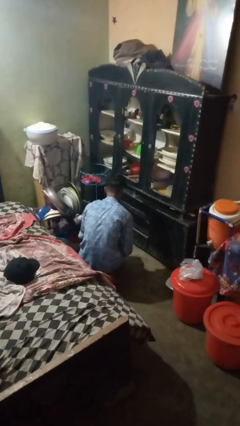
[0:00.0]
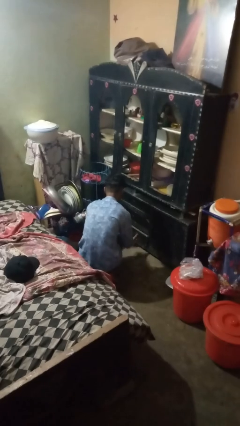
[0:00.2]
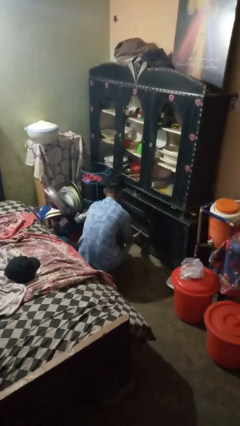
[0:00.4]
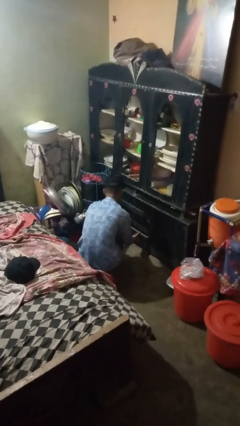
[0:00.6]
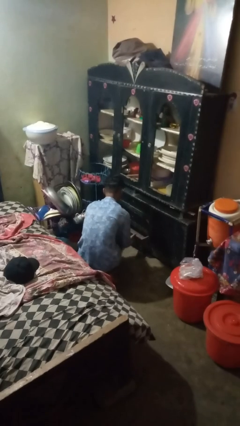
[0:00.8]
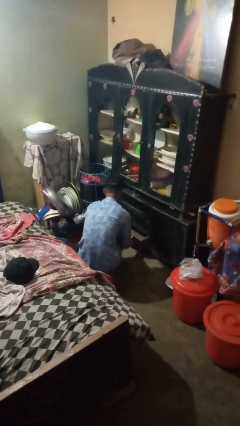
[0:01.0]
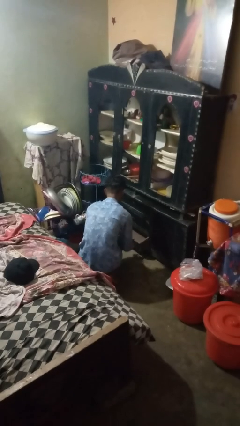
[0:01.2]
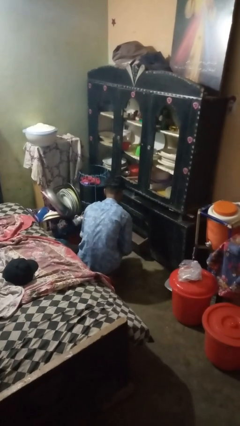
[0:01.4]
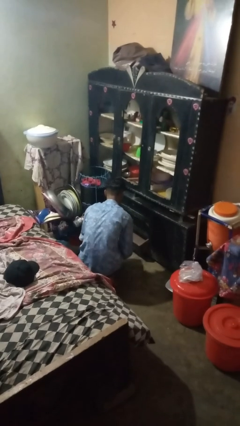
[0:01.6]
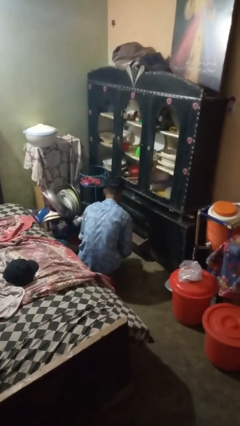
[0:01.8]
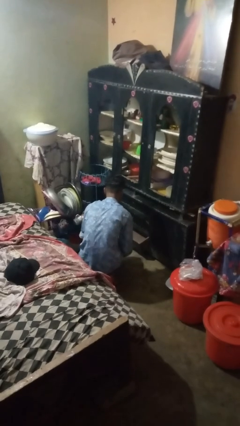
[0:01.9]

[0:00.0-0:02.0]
person opens kitchen drawer

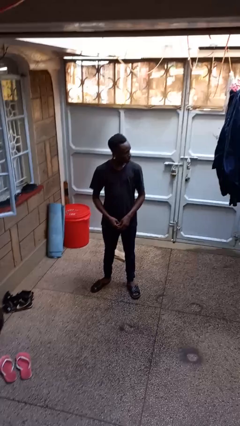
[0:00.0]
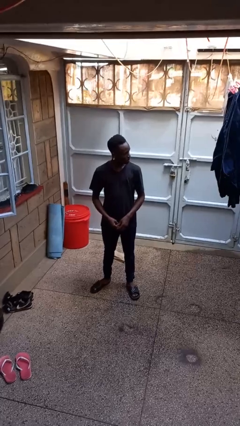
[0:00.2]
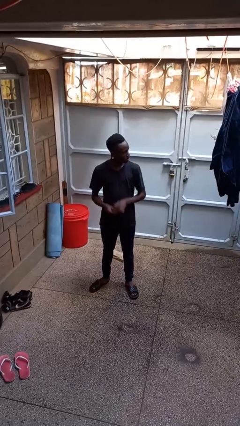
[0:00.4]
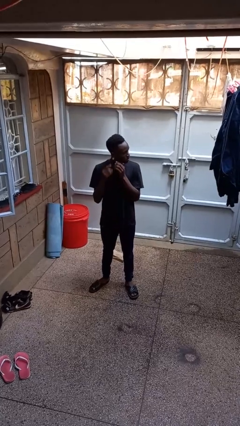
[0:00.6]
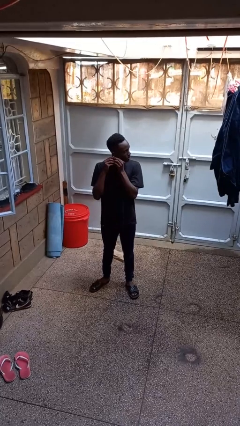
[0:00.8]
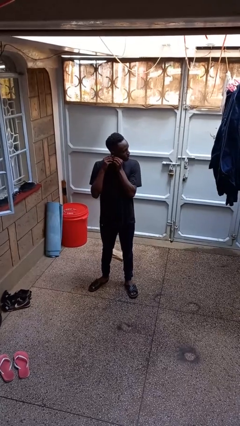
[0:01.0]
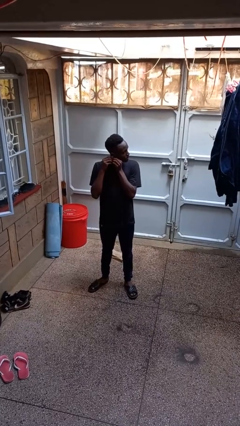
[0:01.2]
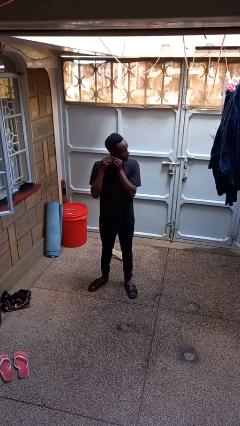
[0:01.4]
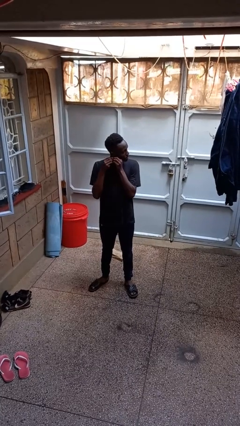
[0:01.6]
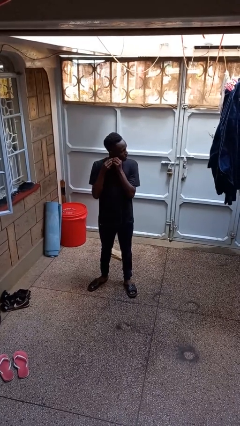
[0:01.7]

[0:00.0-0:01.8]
person takes off earrings

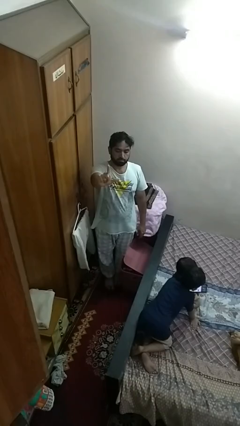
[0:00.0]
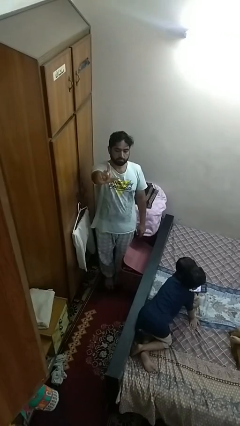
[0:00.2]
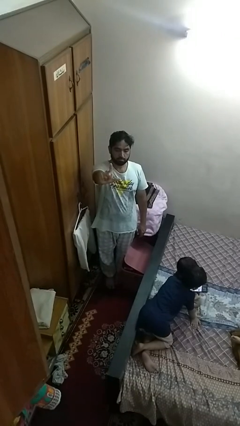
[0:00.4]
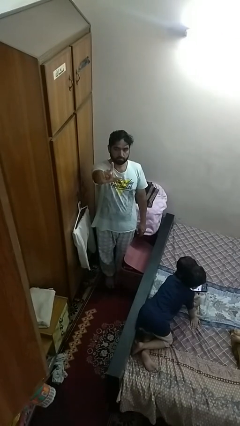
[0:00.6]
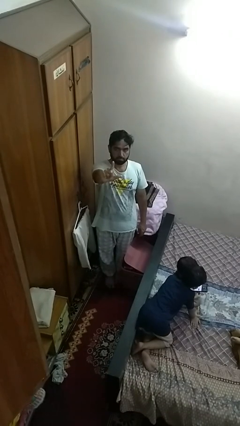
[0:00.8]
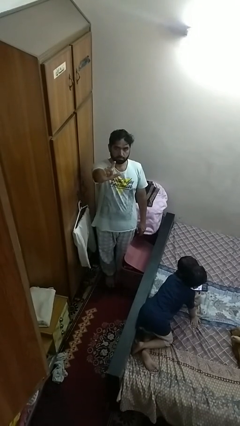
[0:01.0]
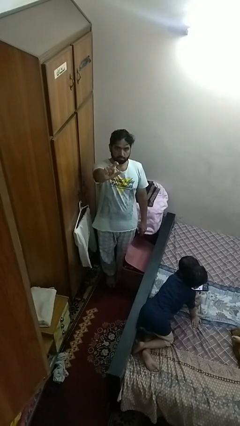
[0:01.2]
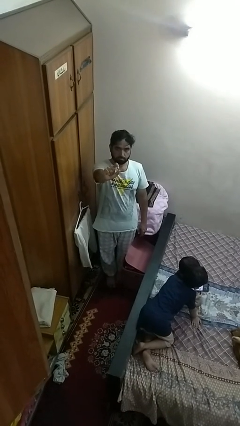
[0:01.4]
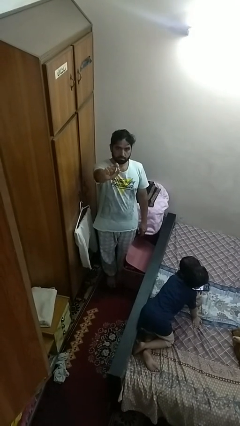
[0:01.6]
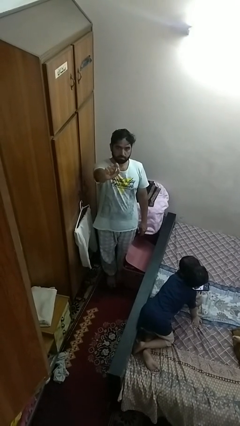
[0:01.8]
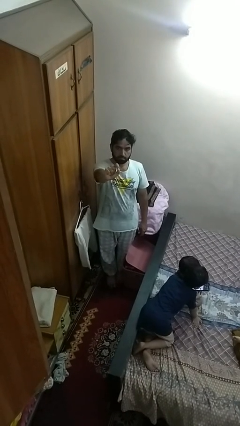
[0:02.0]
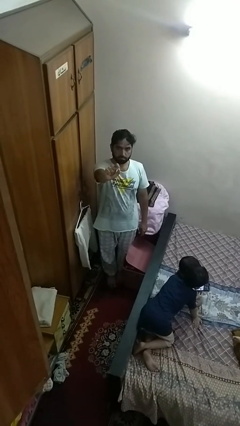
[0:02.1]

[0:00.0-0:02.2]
person gestures zoom in

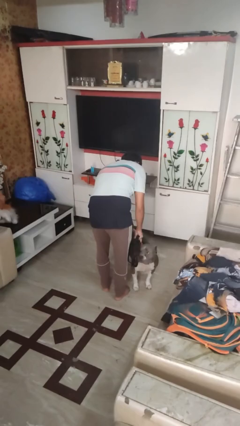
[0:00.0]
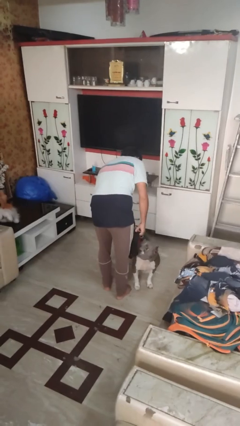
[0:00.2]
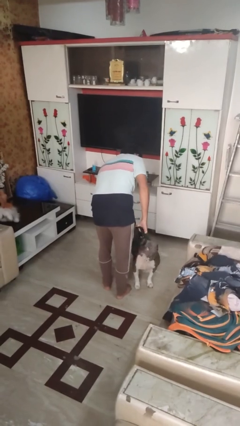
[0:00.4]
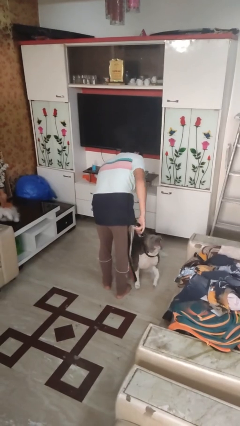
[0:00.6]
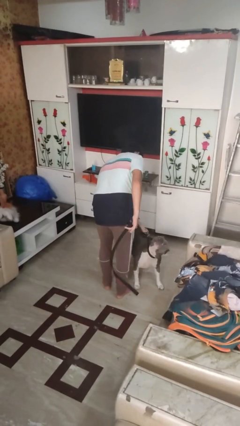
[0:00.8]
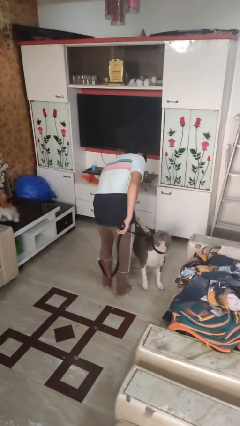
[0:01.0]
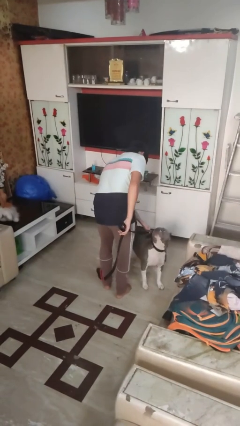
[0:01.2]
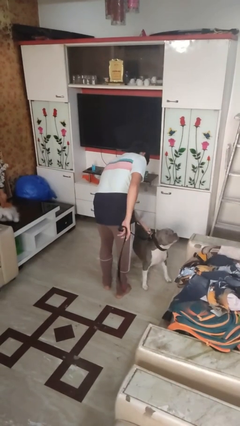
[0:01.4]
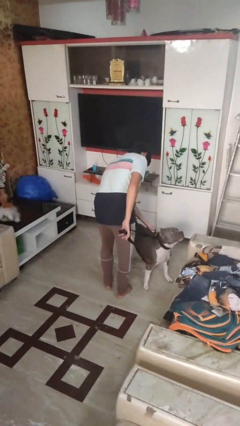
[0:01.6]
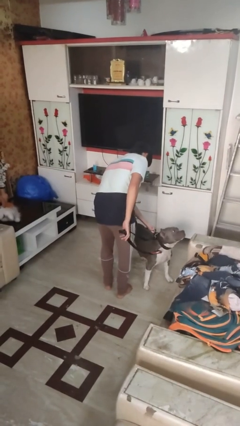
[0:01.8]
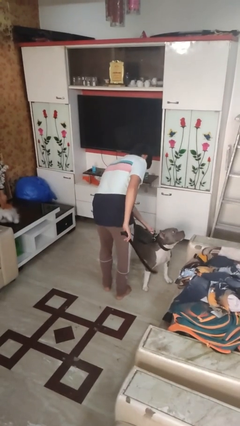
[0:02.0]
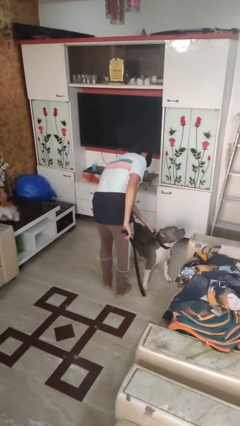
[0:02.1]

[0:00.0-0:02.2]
person attaches leash to dog

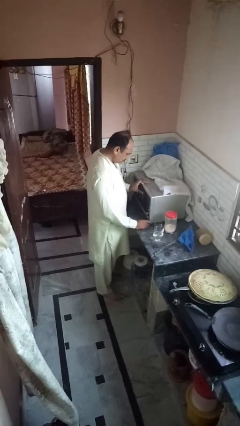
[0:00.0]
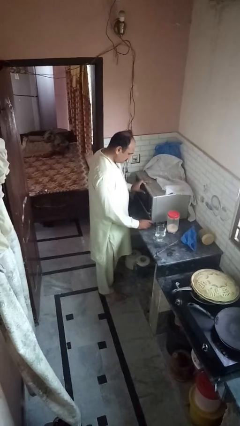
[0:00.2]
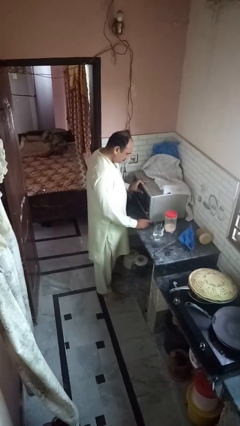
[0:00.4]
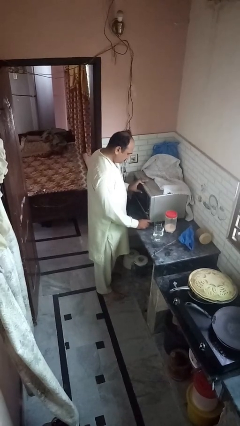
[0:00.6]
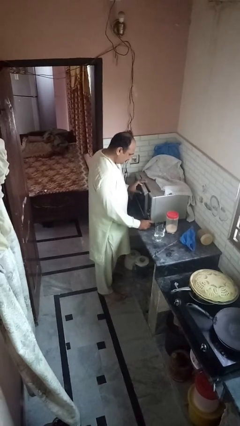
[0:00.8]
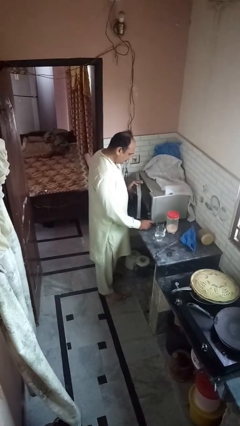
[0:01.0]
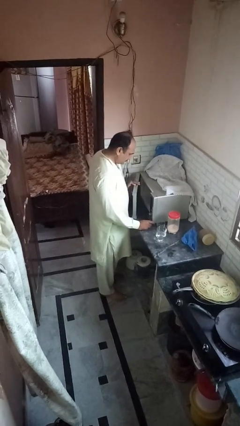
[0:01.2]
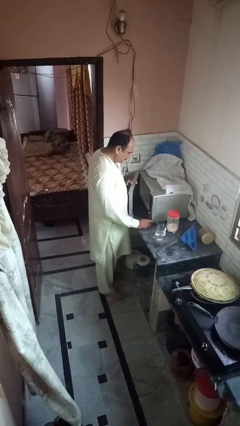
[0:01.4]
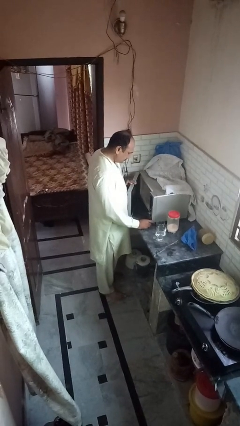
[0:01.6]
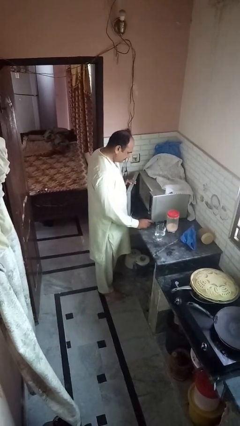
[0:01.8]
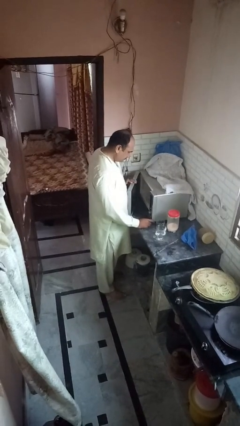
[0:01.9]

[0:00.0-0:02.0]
person opens microwave

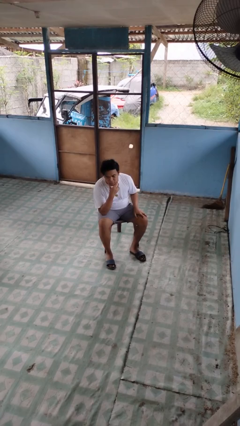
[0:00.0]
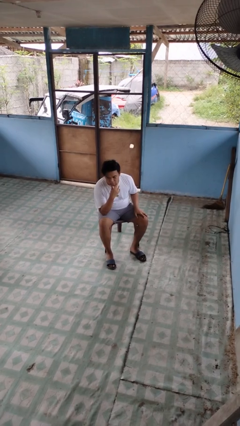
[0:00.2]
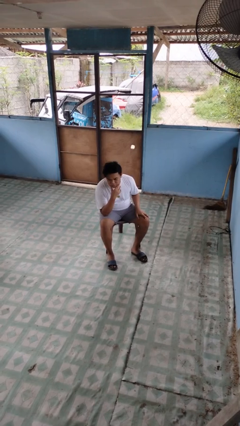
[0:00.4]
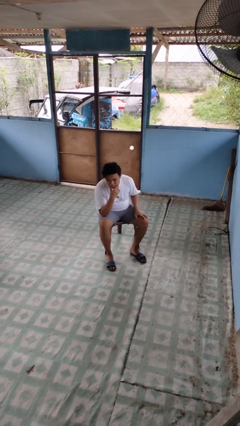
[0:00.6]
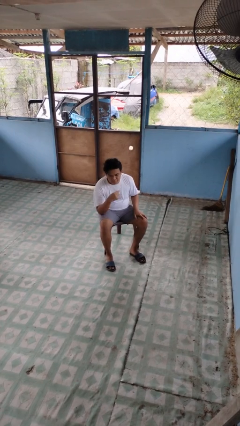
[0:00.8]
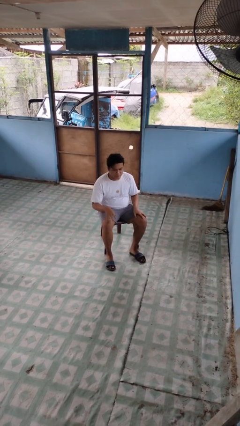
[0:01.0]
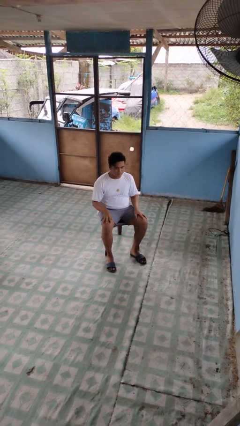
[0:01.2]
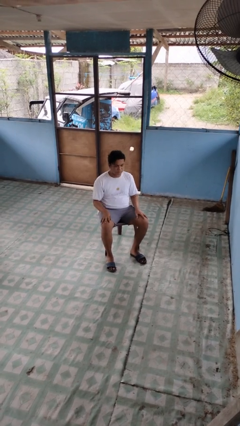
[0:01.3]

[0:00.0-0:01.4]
person strokes chin

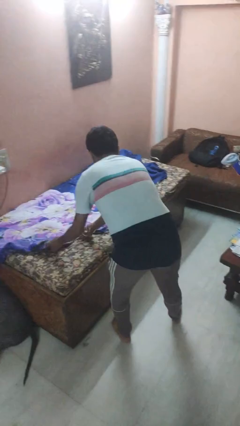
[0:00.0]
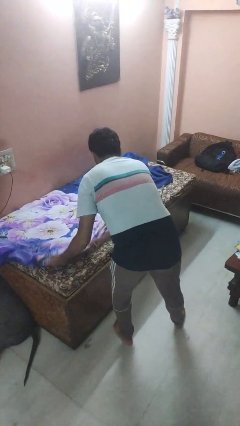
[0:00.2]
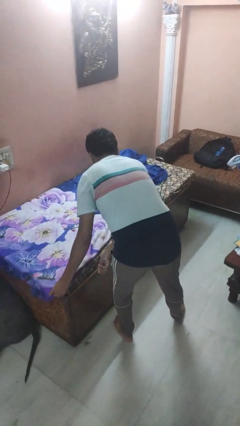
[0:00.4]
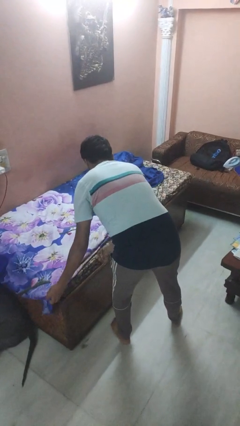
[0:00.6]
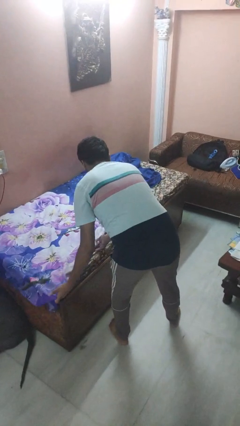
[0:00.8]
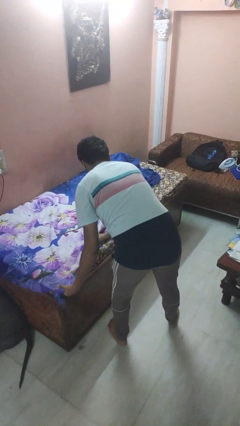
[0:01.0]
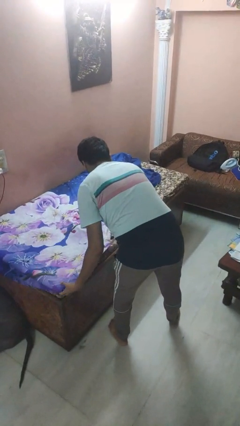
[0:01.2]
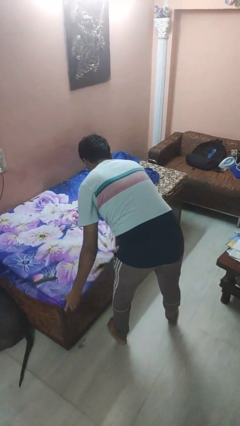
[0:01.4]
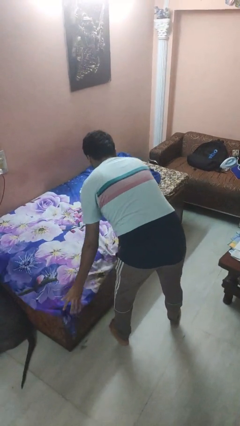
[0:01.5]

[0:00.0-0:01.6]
person makes bed

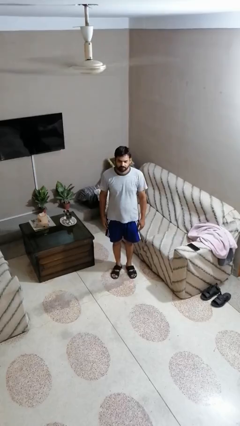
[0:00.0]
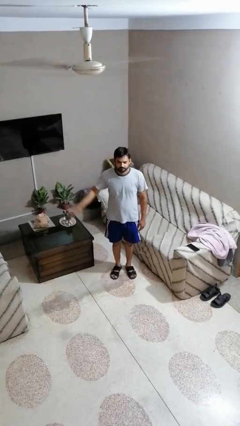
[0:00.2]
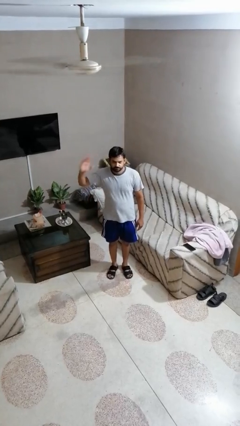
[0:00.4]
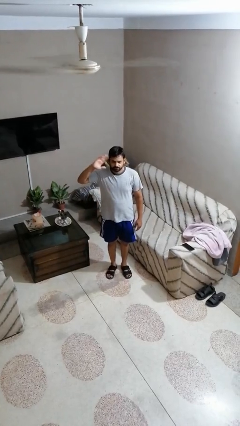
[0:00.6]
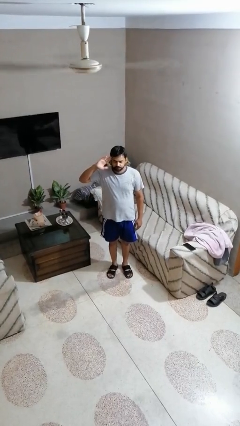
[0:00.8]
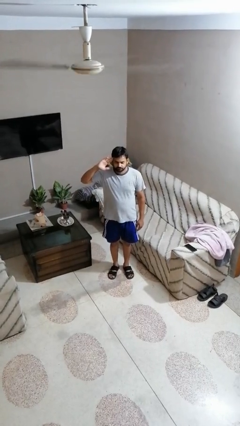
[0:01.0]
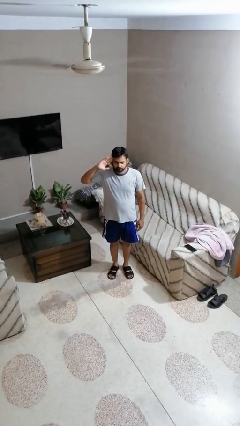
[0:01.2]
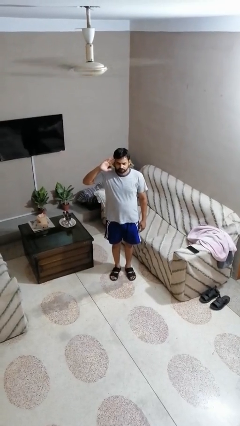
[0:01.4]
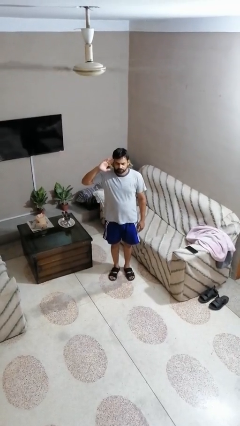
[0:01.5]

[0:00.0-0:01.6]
person salutes

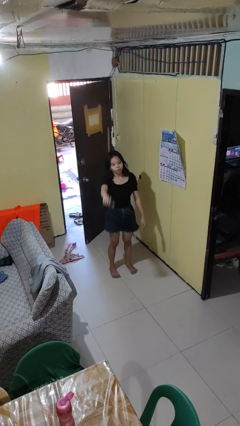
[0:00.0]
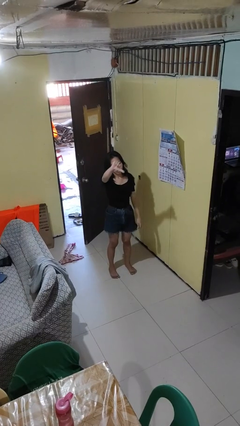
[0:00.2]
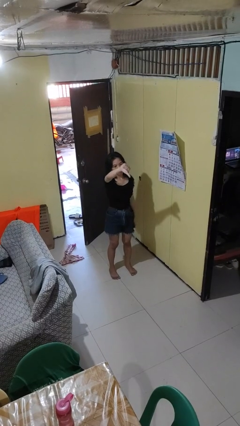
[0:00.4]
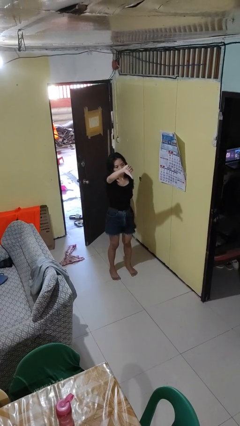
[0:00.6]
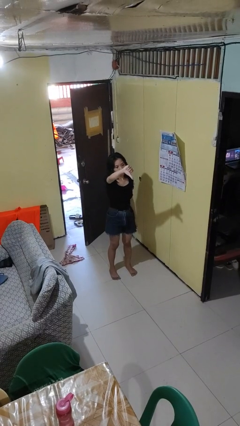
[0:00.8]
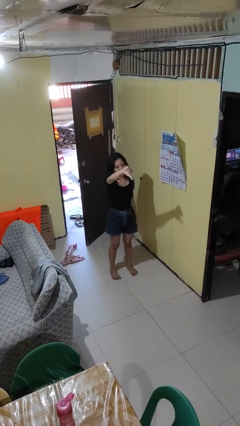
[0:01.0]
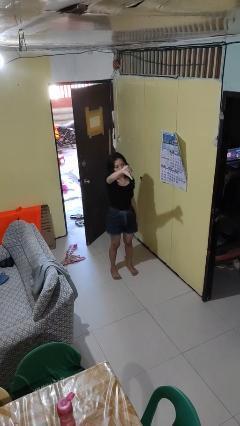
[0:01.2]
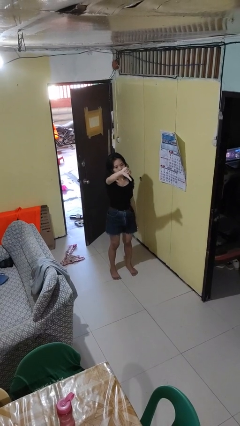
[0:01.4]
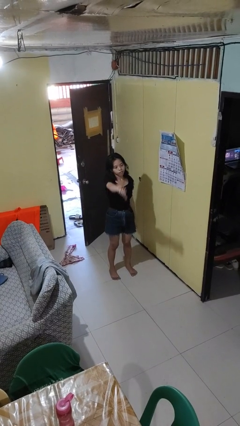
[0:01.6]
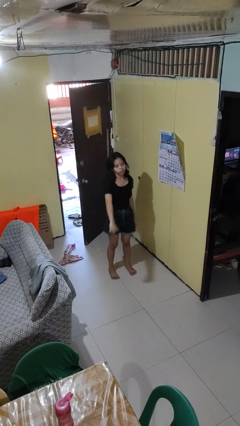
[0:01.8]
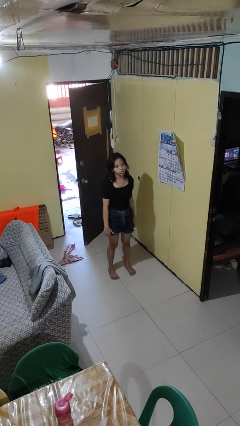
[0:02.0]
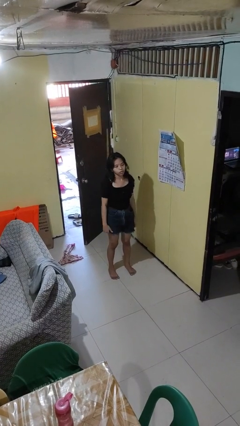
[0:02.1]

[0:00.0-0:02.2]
person gestures thumbs down
